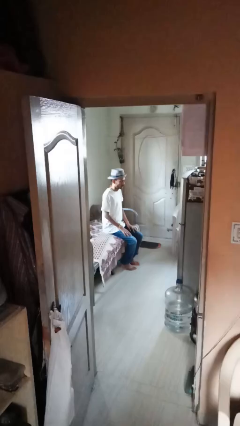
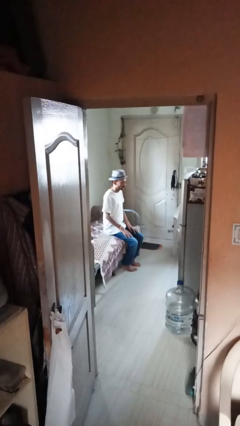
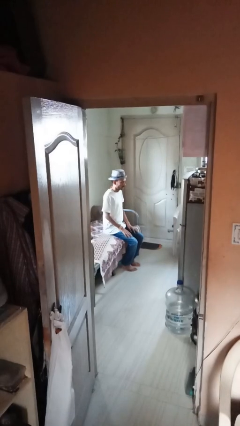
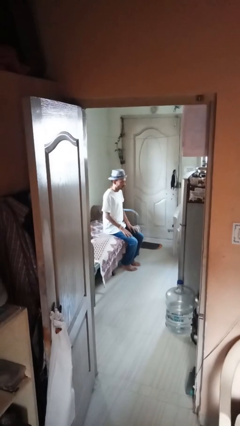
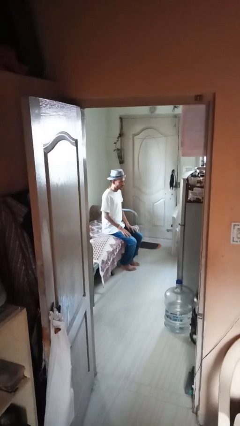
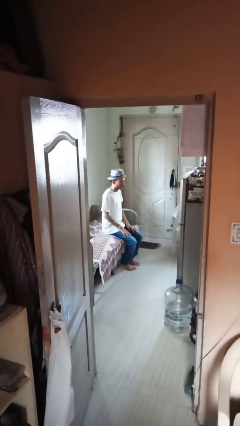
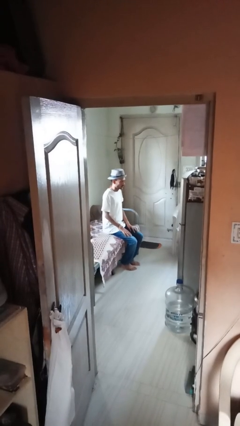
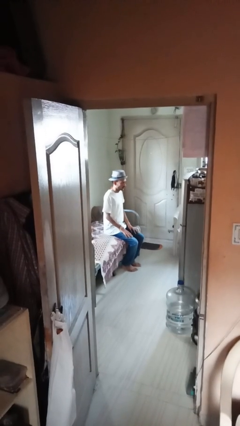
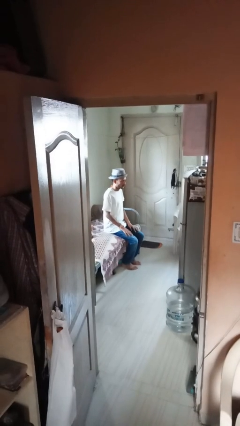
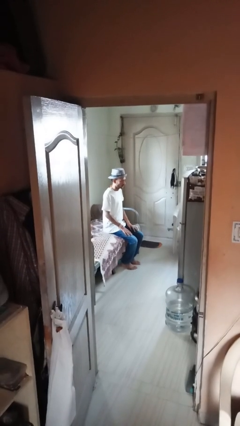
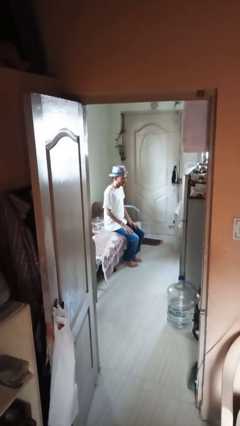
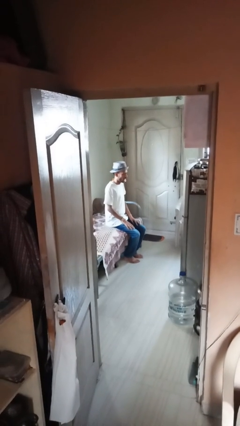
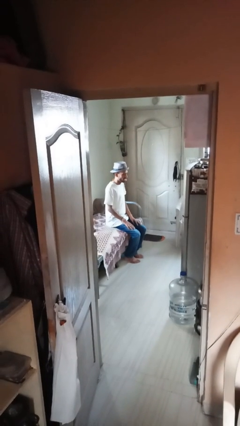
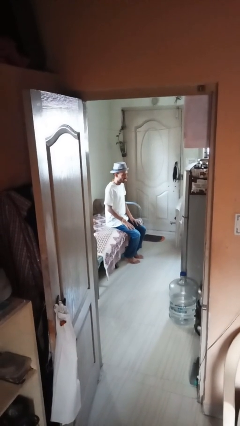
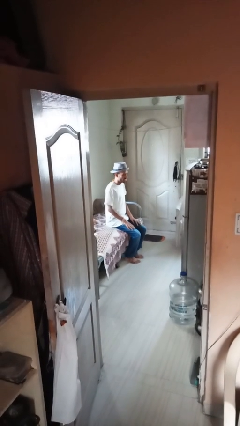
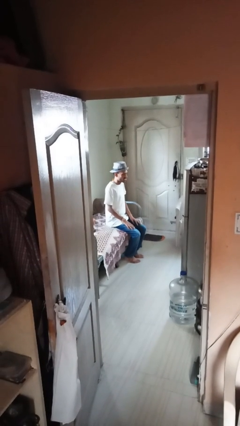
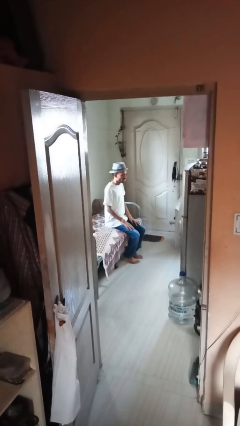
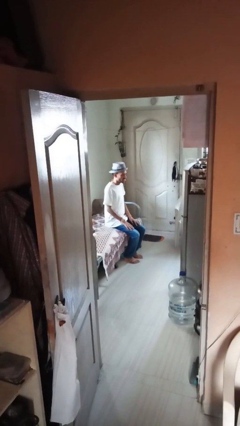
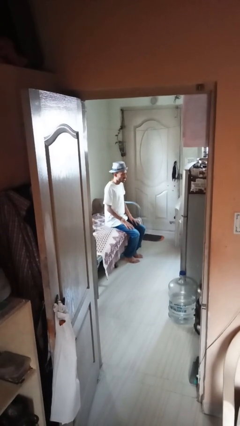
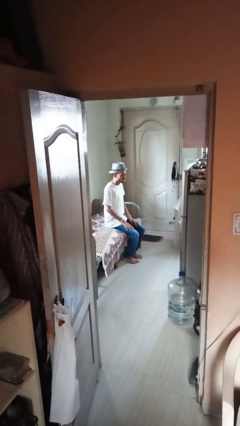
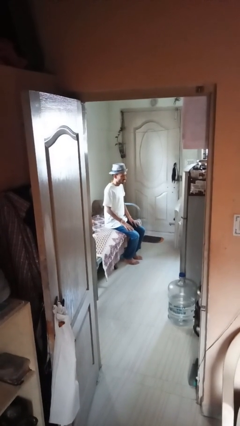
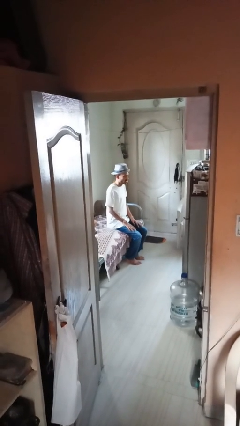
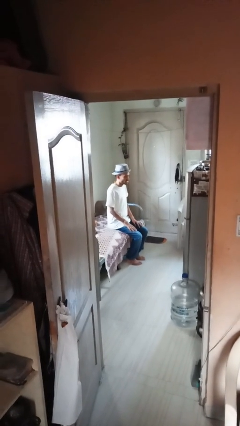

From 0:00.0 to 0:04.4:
person sticks out tongue

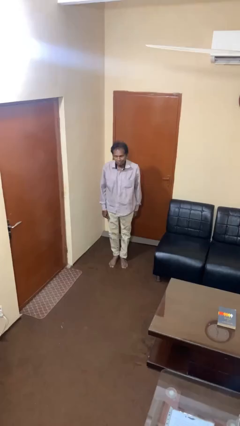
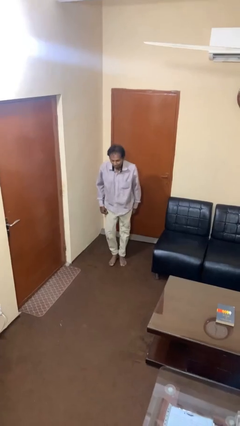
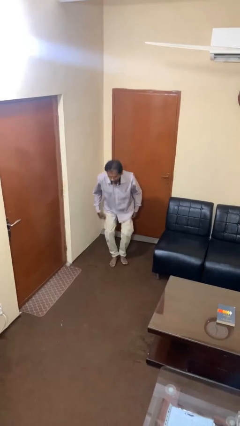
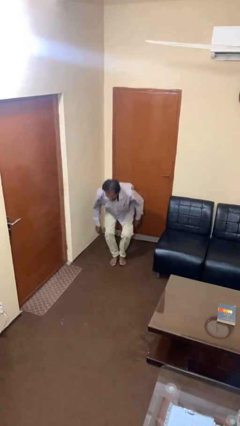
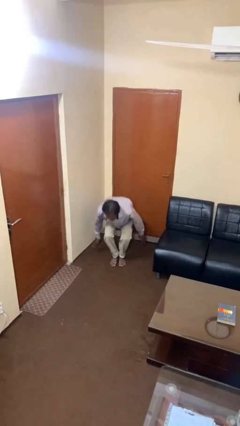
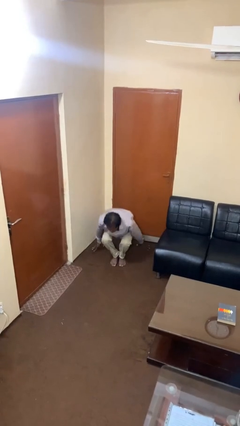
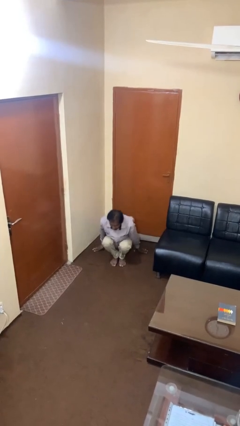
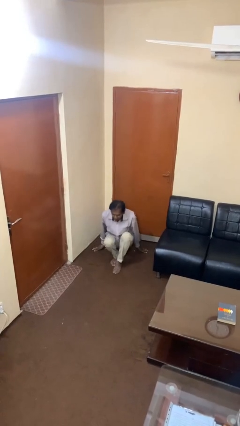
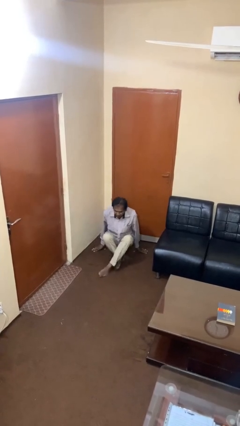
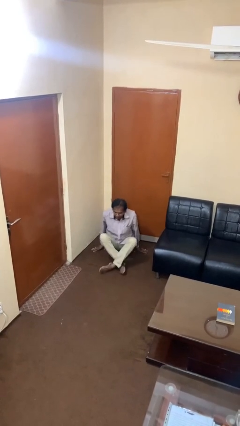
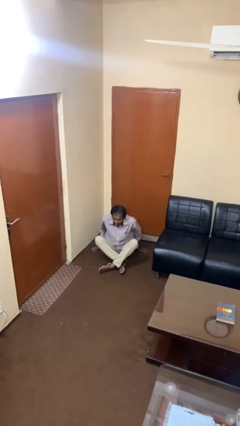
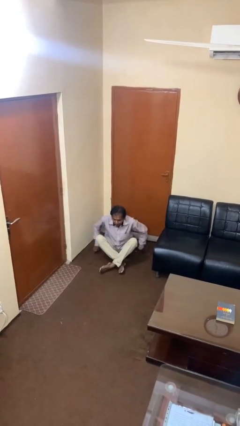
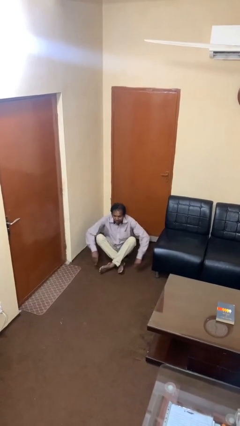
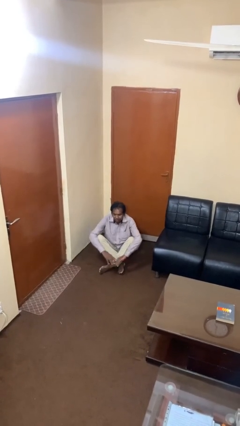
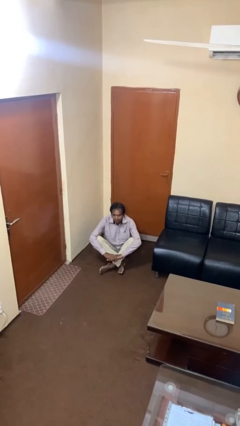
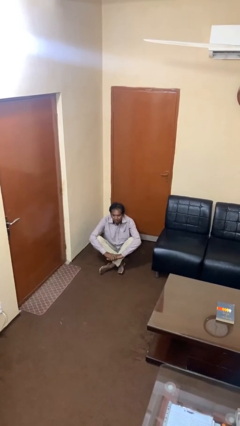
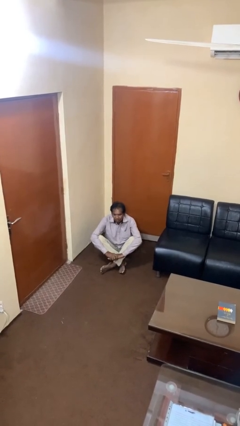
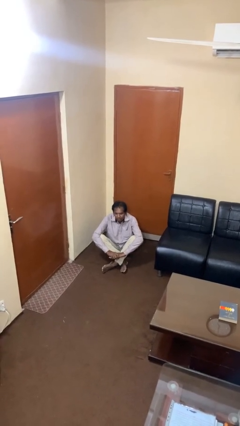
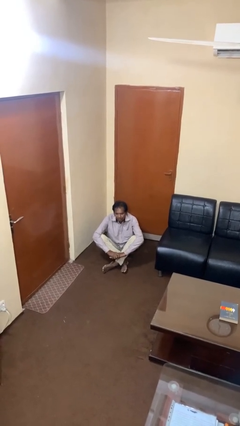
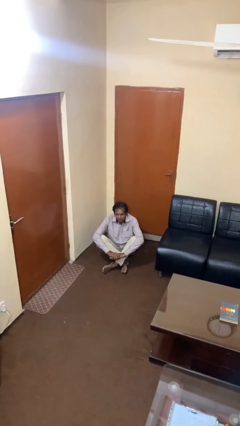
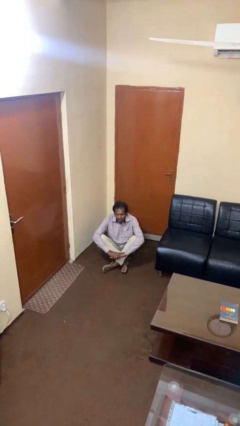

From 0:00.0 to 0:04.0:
person sits crisscross

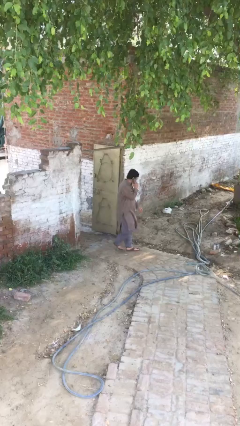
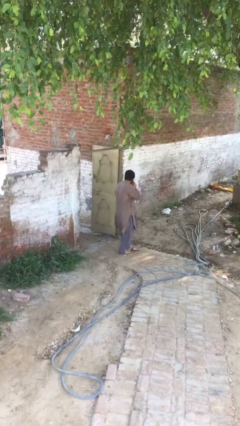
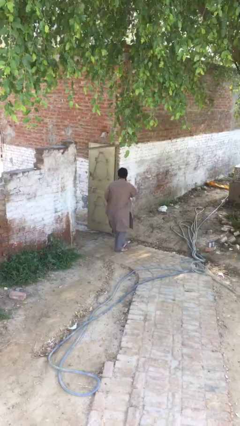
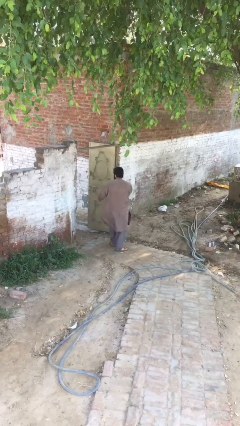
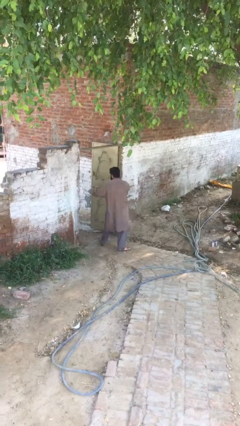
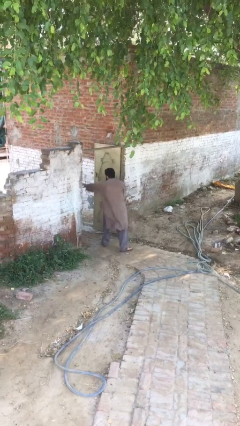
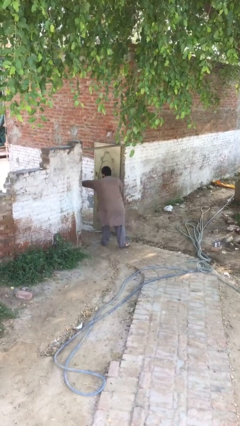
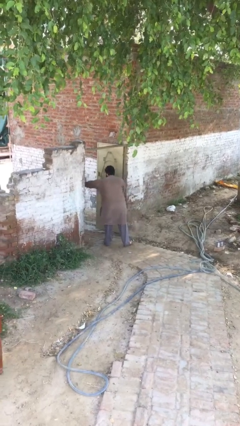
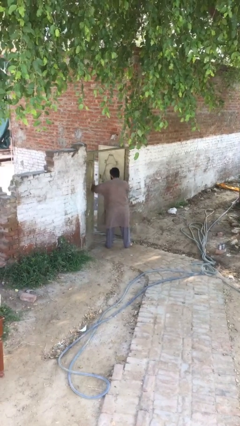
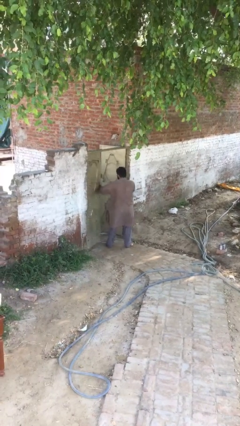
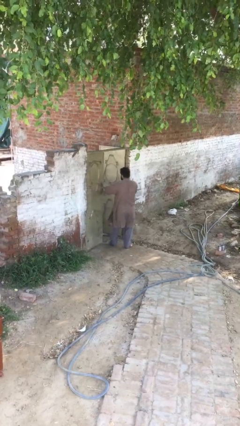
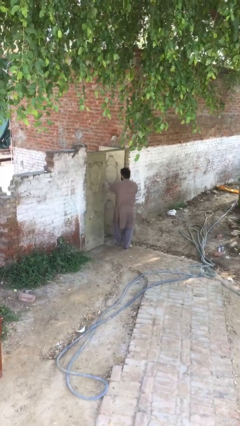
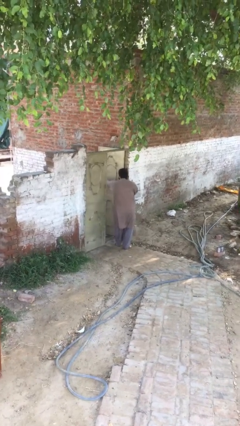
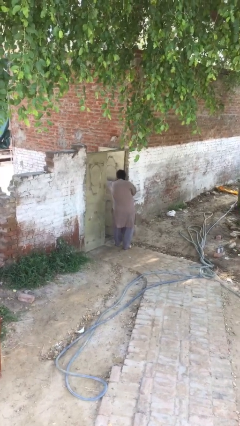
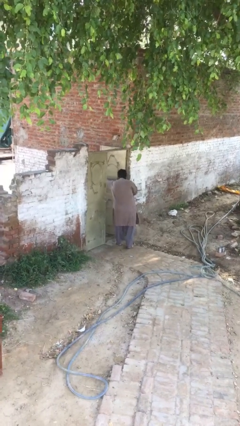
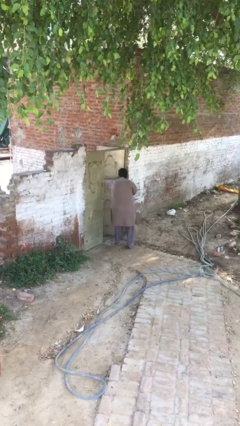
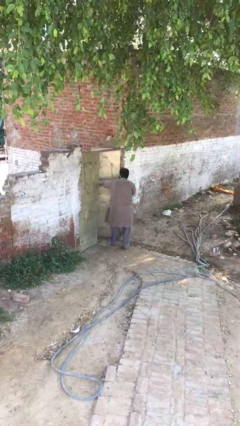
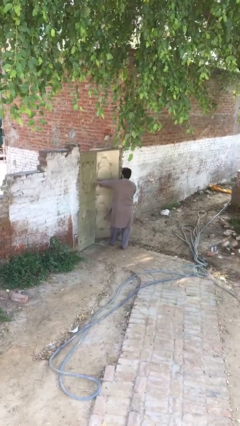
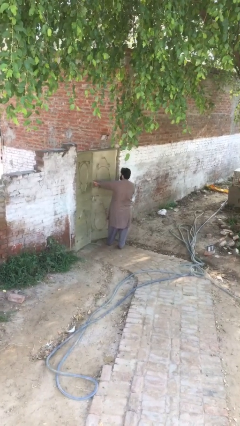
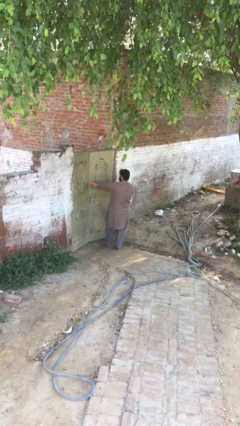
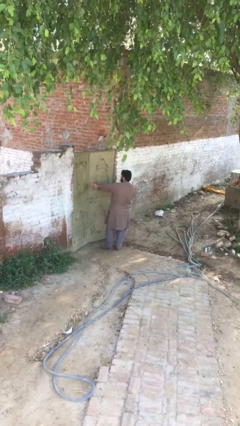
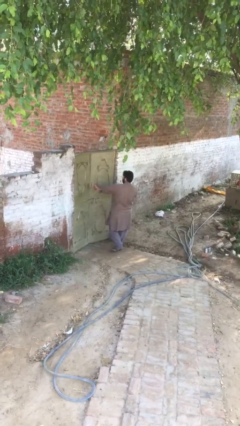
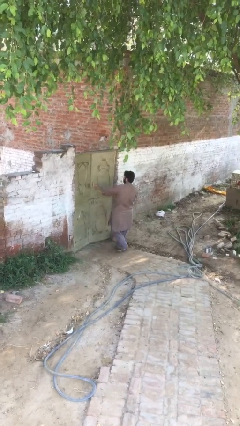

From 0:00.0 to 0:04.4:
person closes facility door

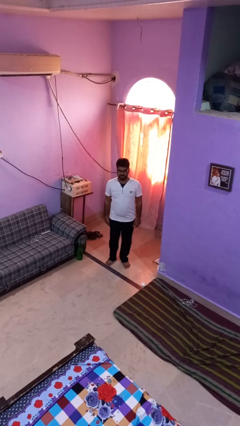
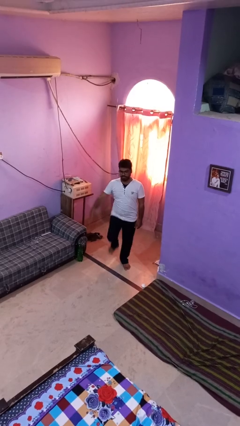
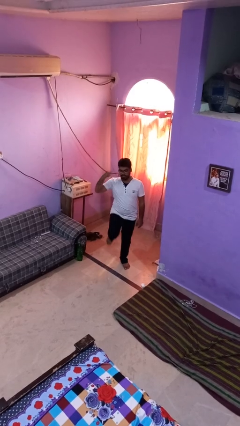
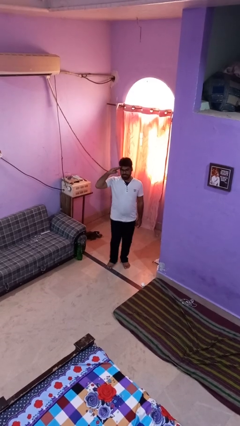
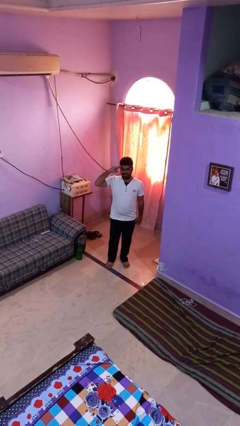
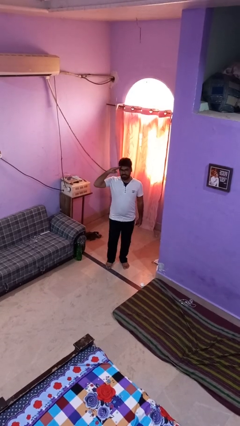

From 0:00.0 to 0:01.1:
person salutes

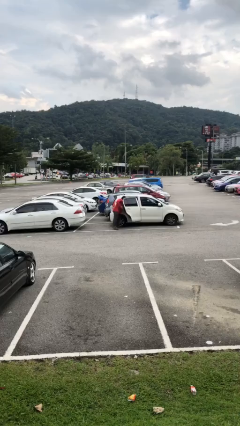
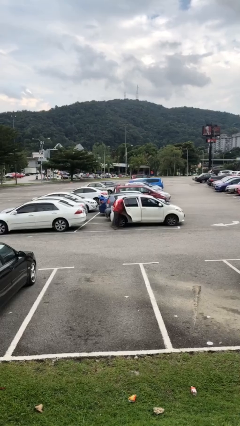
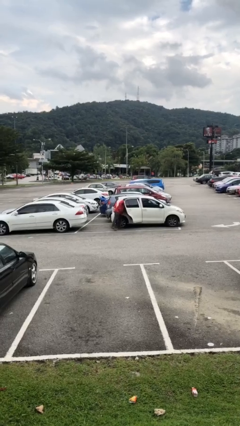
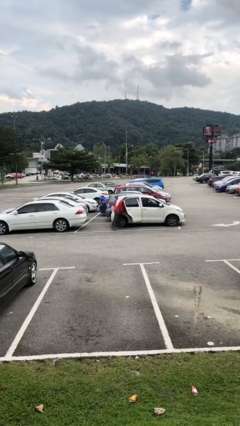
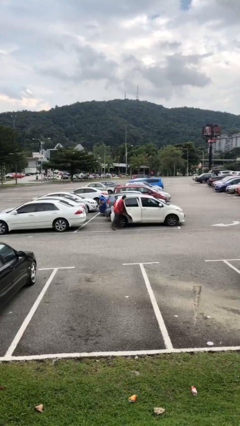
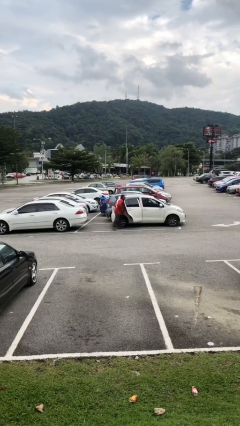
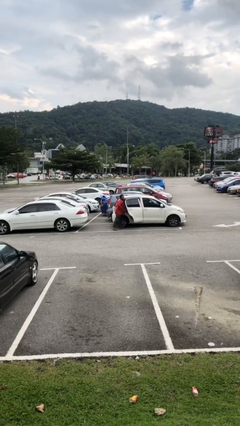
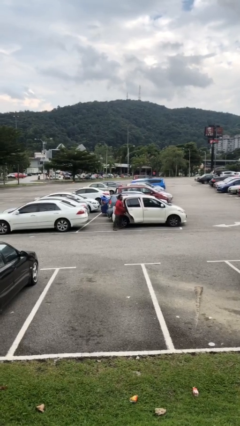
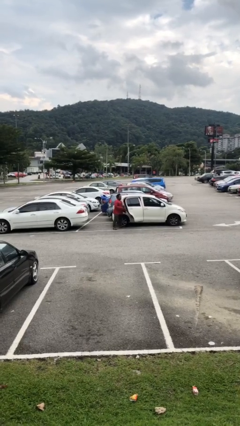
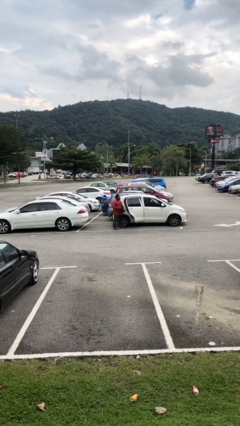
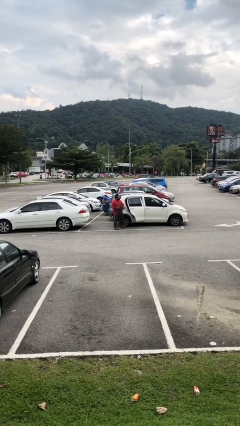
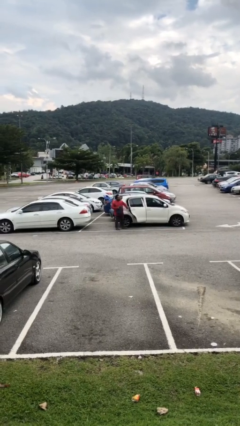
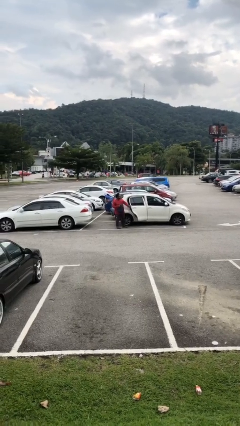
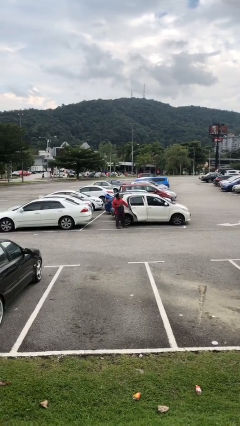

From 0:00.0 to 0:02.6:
person unloads car

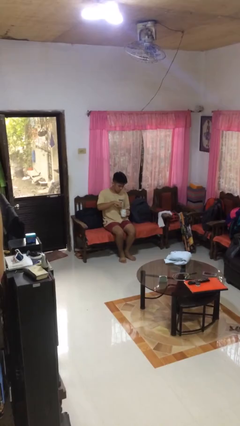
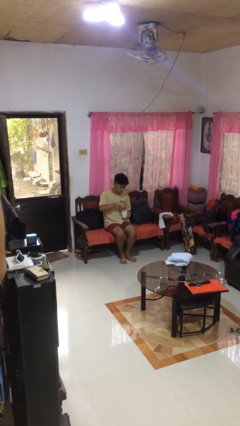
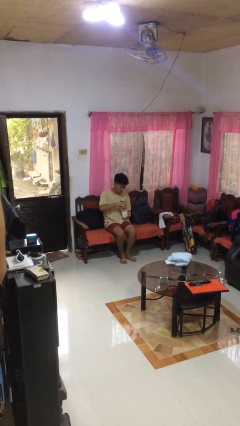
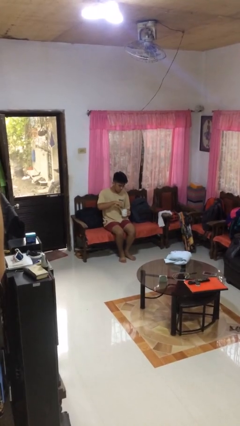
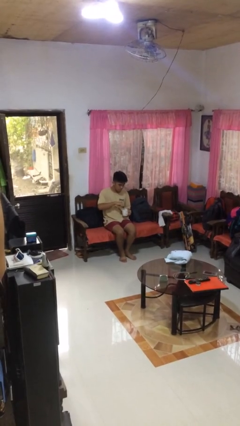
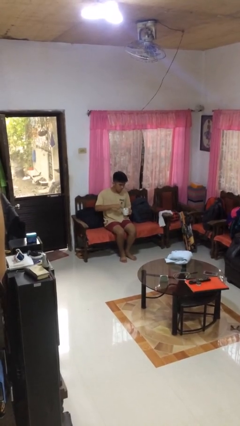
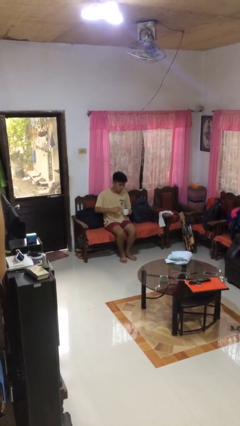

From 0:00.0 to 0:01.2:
person stirs mug
